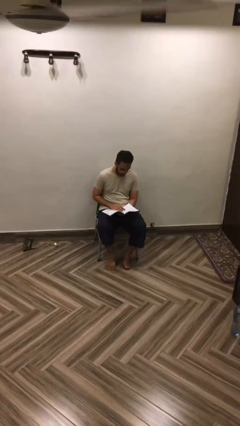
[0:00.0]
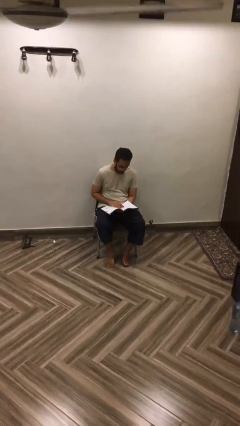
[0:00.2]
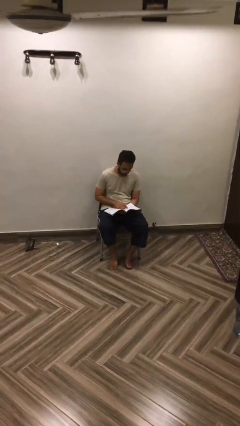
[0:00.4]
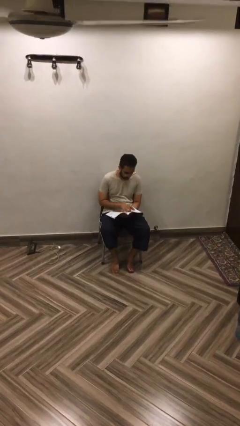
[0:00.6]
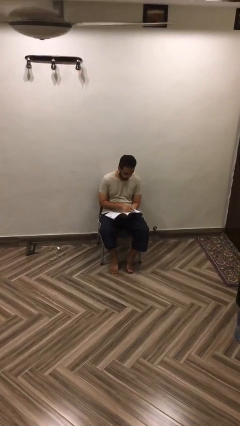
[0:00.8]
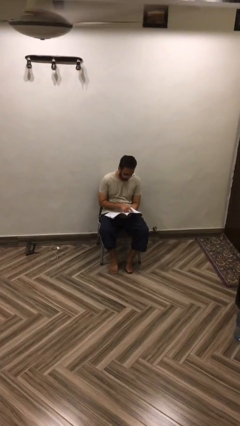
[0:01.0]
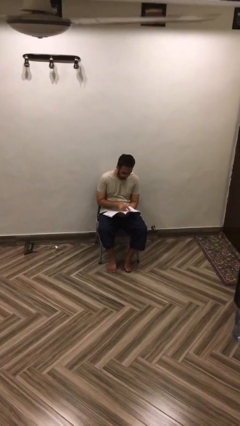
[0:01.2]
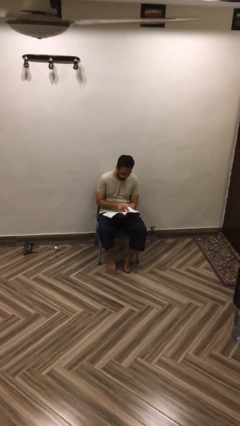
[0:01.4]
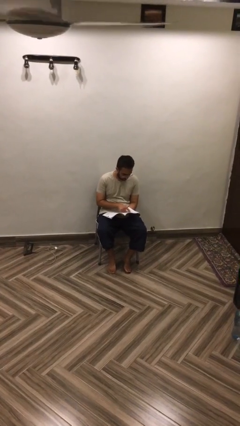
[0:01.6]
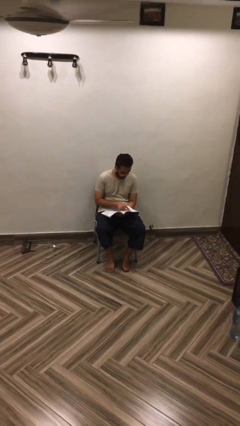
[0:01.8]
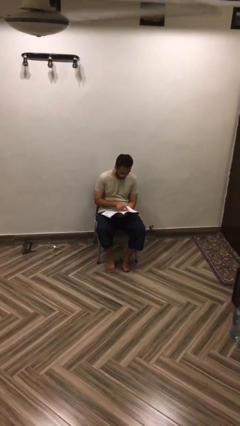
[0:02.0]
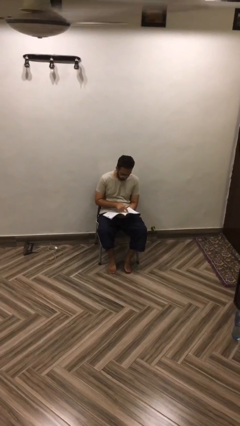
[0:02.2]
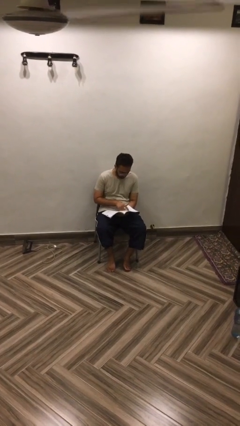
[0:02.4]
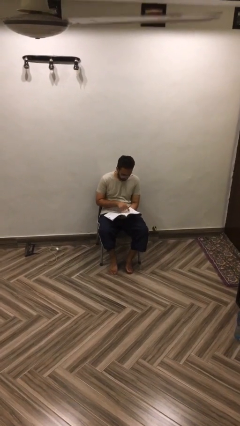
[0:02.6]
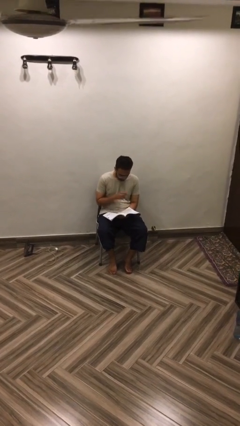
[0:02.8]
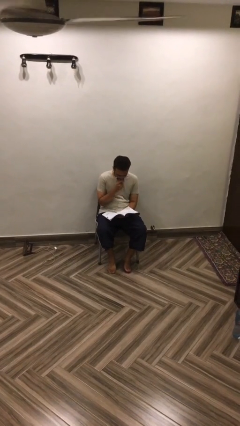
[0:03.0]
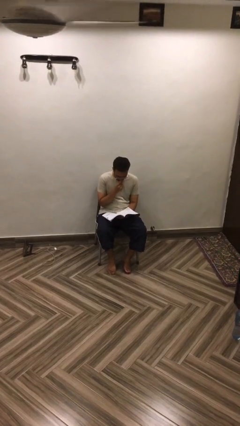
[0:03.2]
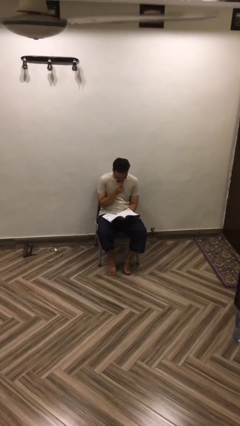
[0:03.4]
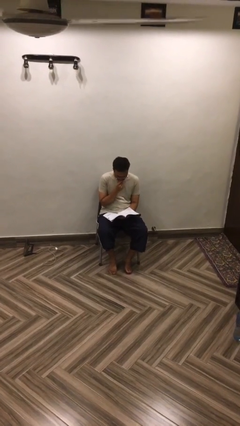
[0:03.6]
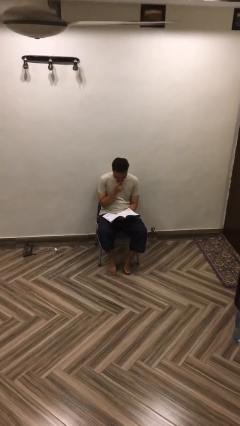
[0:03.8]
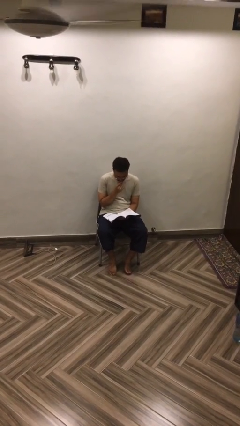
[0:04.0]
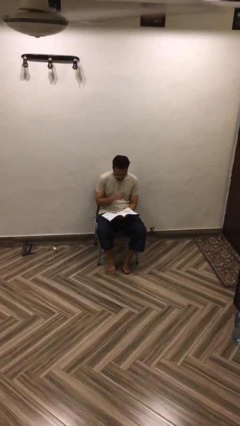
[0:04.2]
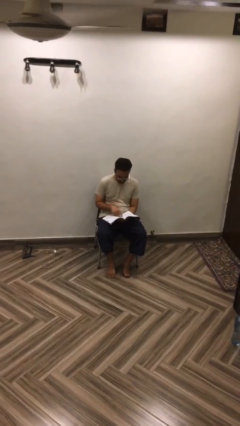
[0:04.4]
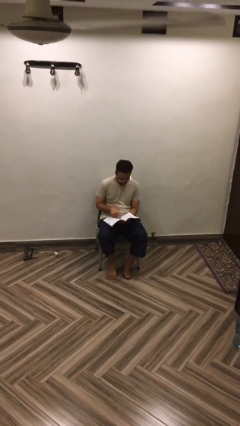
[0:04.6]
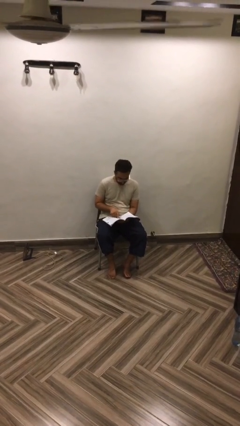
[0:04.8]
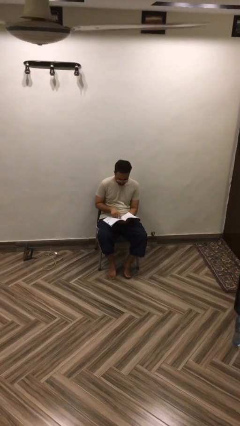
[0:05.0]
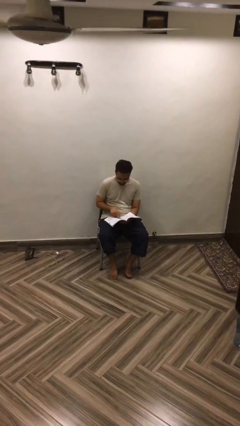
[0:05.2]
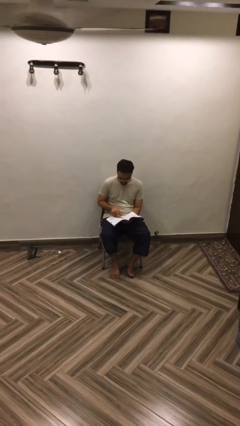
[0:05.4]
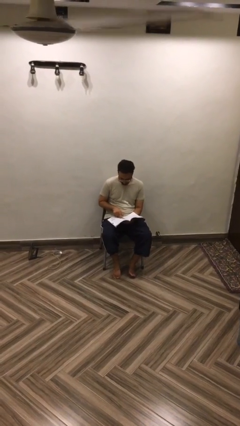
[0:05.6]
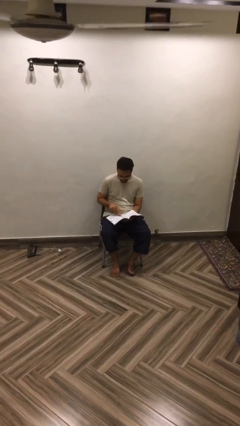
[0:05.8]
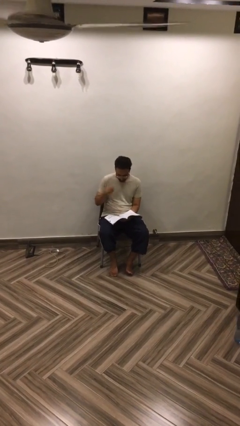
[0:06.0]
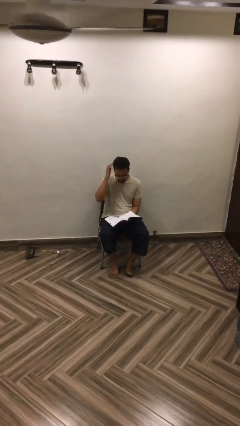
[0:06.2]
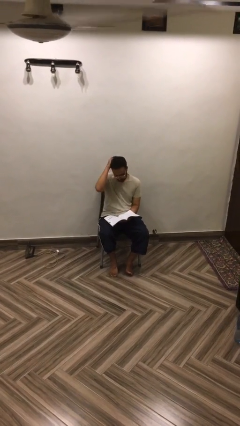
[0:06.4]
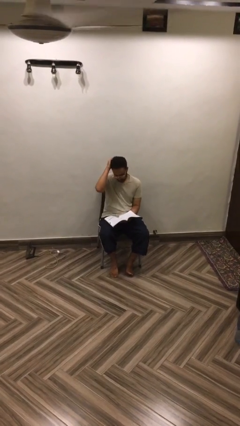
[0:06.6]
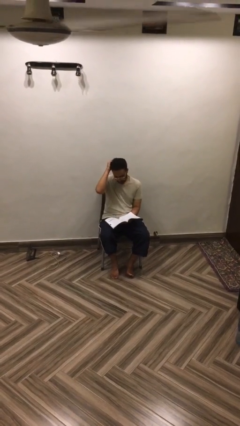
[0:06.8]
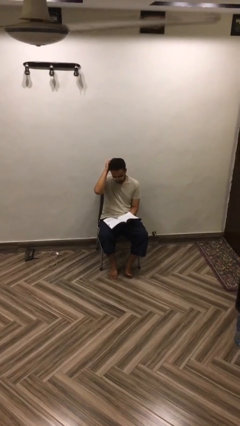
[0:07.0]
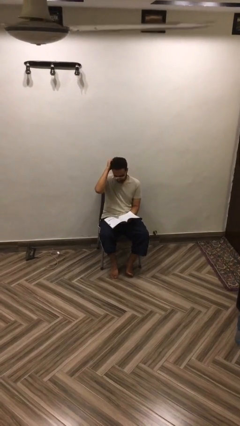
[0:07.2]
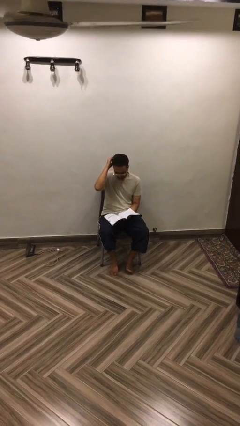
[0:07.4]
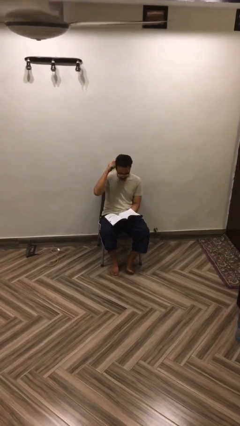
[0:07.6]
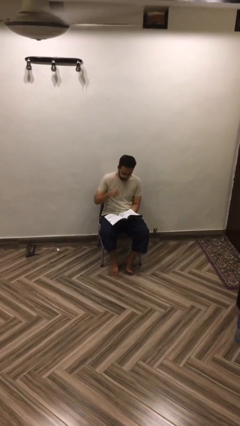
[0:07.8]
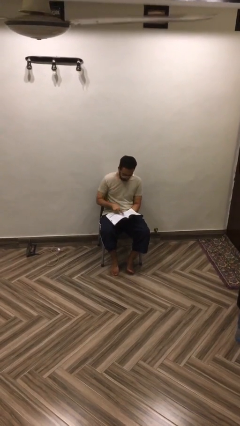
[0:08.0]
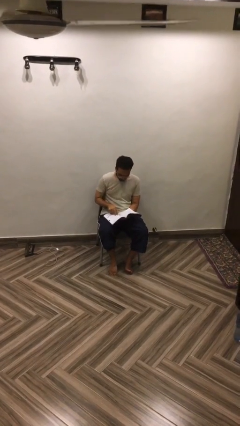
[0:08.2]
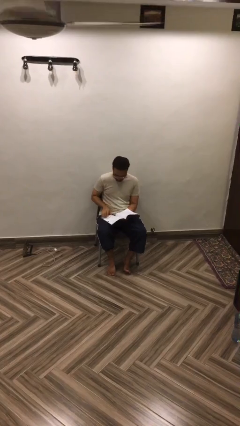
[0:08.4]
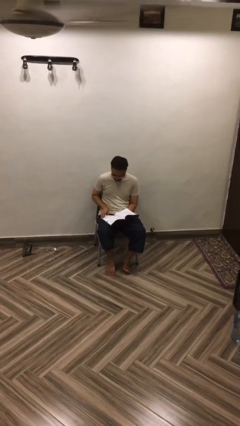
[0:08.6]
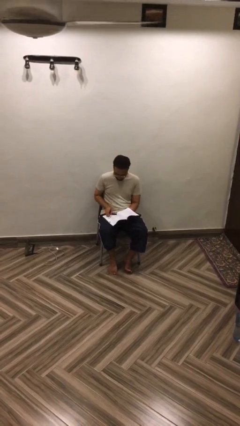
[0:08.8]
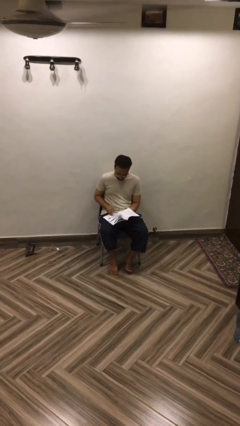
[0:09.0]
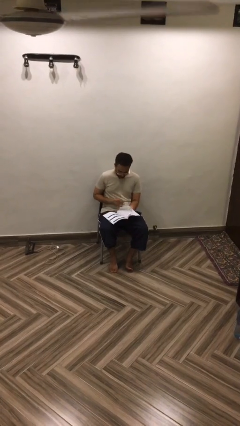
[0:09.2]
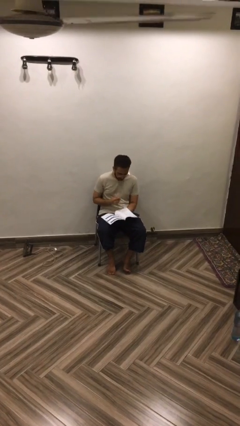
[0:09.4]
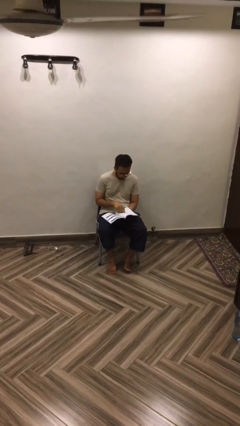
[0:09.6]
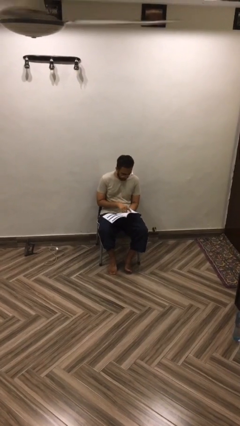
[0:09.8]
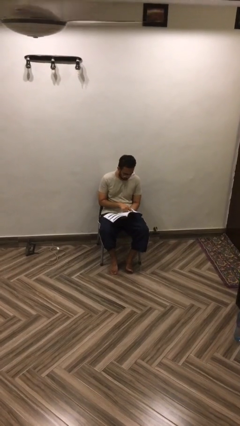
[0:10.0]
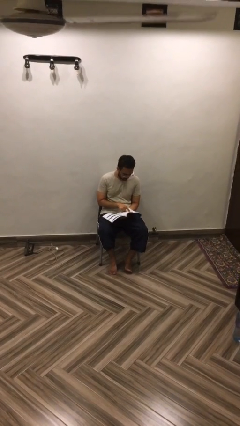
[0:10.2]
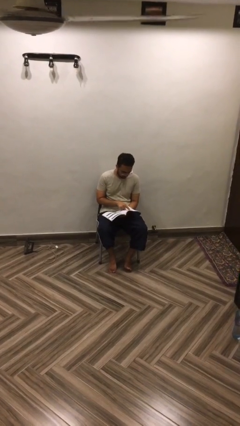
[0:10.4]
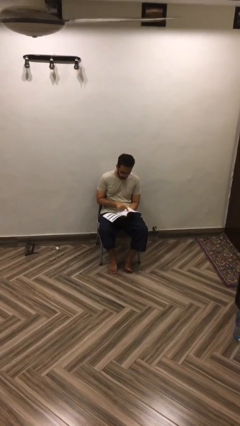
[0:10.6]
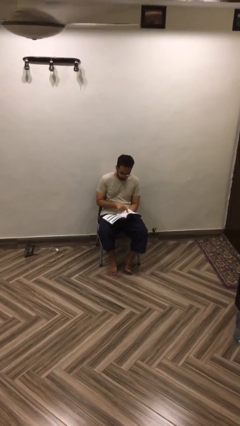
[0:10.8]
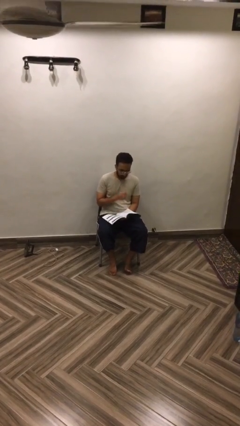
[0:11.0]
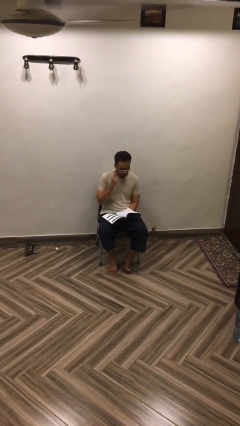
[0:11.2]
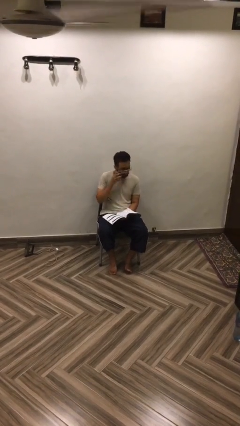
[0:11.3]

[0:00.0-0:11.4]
person reads document

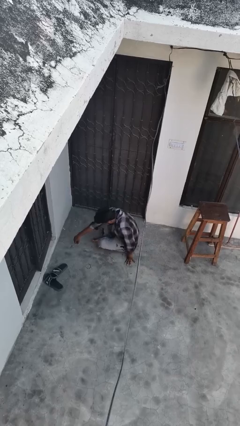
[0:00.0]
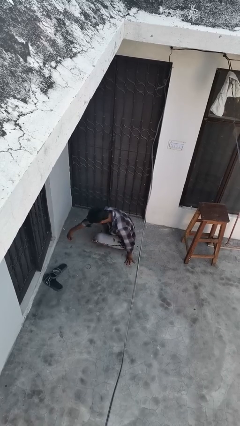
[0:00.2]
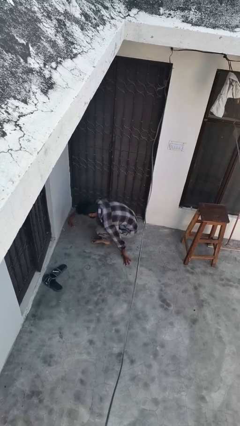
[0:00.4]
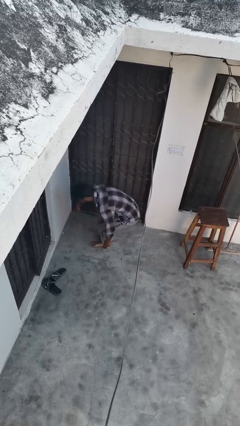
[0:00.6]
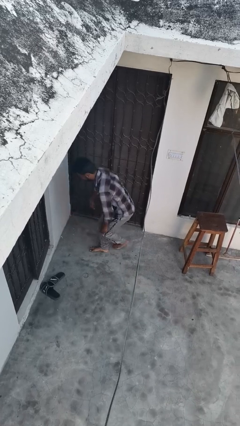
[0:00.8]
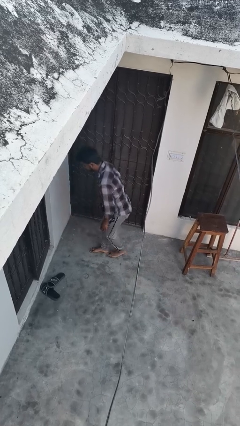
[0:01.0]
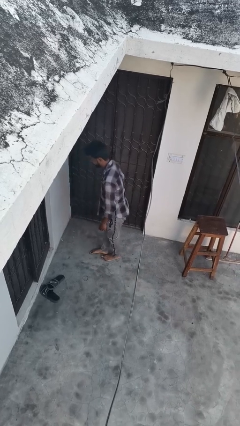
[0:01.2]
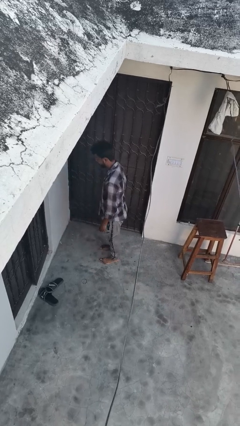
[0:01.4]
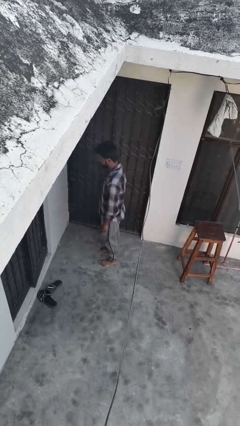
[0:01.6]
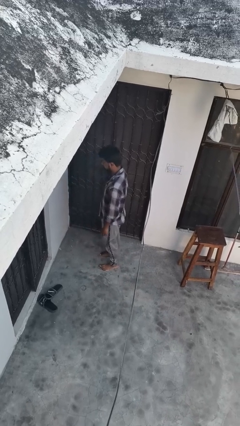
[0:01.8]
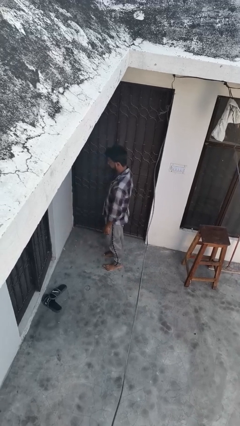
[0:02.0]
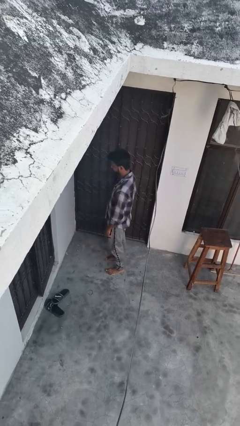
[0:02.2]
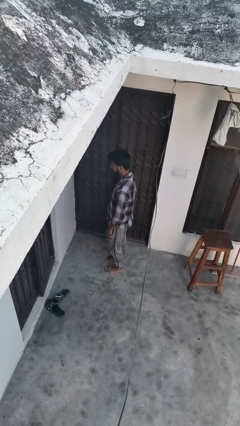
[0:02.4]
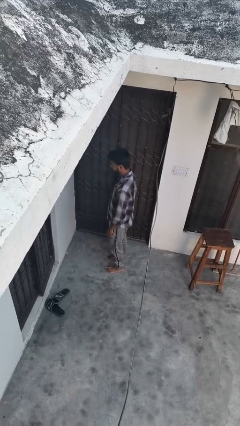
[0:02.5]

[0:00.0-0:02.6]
person stands up from floor

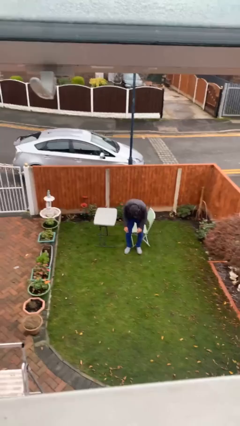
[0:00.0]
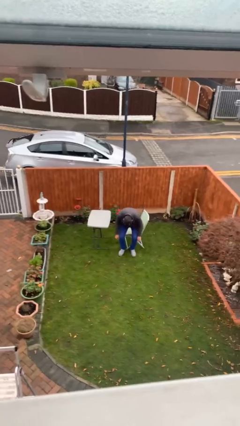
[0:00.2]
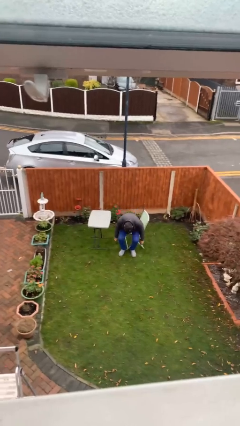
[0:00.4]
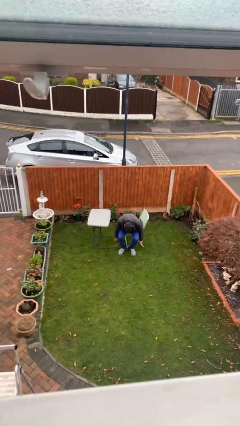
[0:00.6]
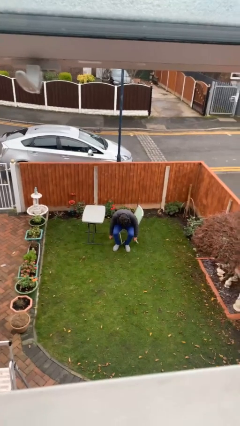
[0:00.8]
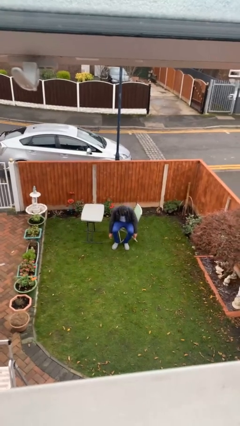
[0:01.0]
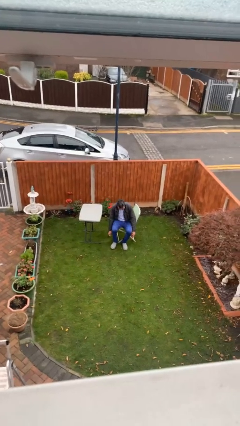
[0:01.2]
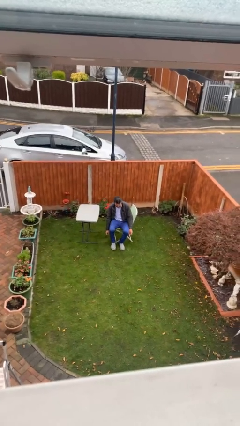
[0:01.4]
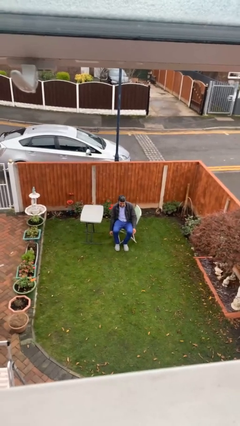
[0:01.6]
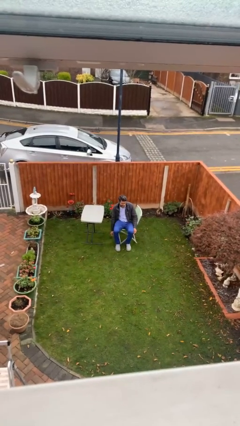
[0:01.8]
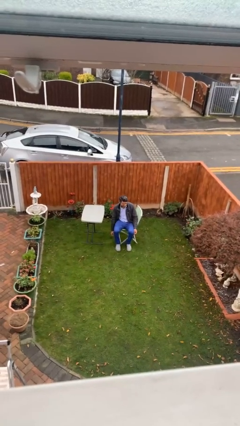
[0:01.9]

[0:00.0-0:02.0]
person sits down

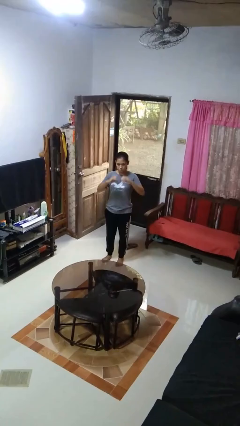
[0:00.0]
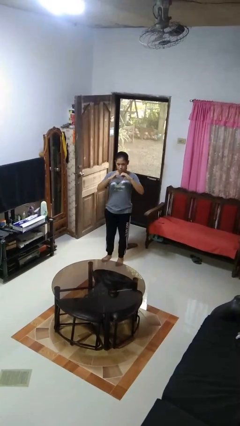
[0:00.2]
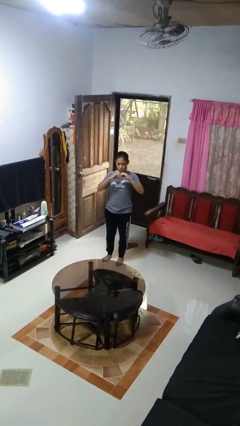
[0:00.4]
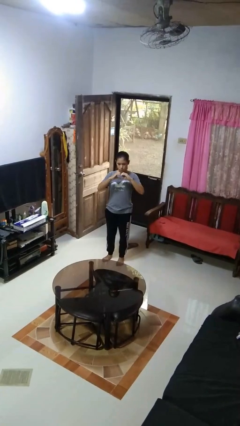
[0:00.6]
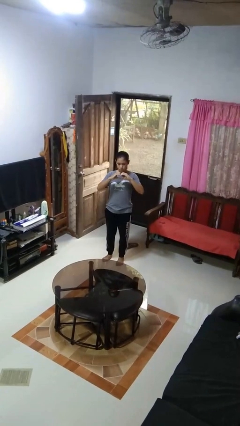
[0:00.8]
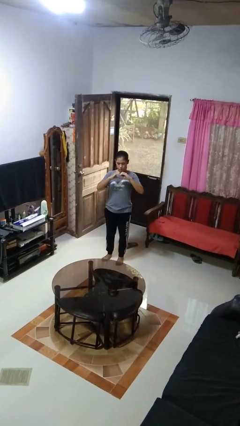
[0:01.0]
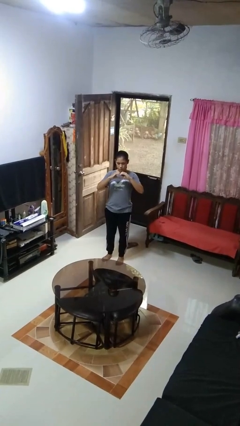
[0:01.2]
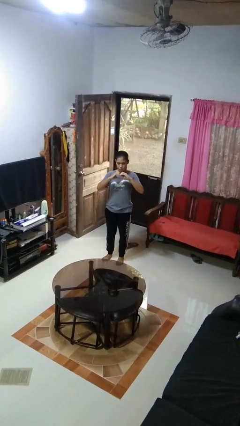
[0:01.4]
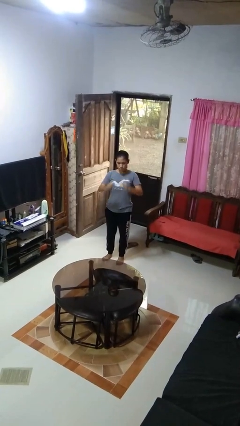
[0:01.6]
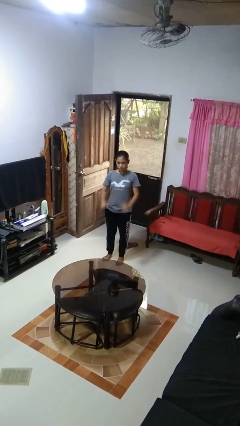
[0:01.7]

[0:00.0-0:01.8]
person gestures heart

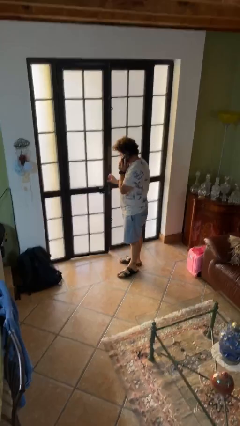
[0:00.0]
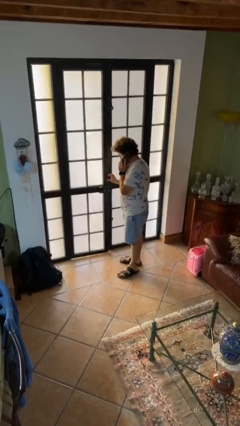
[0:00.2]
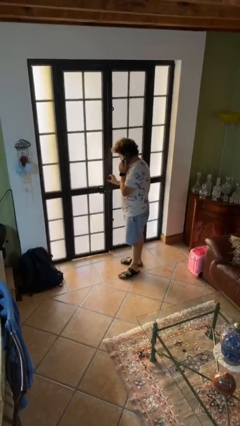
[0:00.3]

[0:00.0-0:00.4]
person closes facility door
